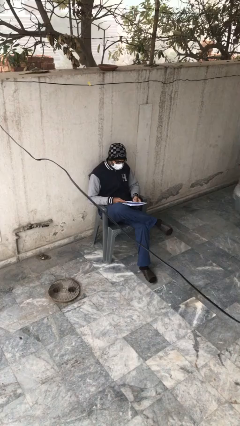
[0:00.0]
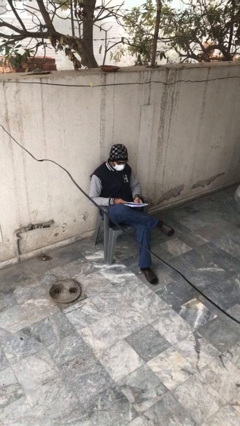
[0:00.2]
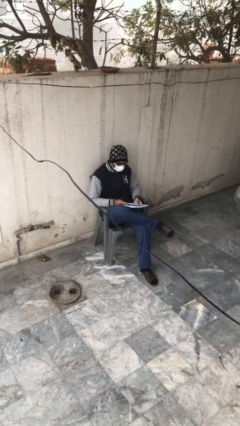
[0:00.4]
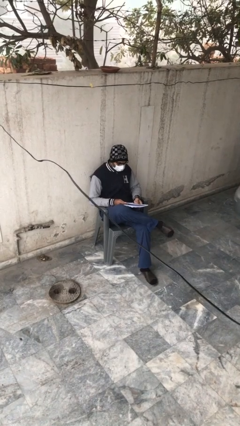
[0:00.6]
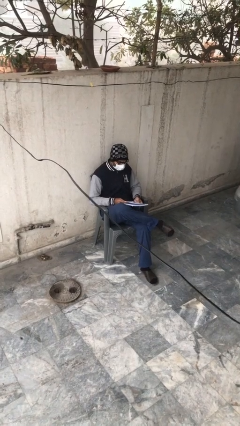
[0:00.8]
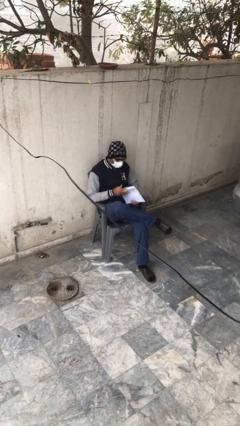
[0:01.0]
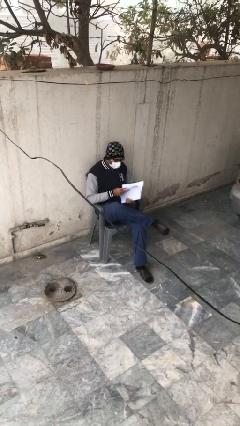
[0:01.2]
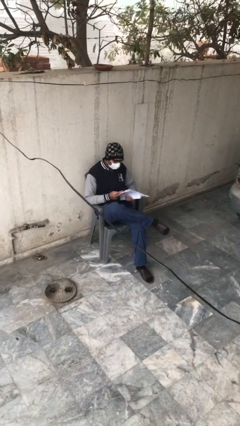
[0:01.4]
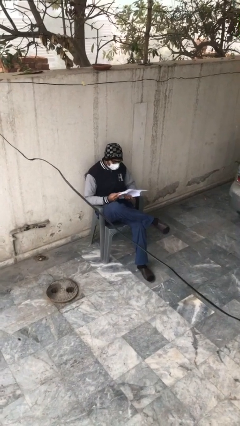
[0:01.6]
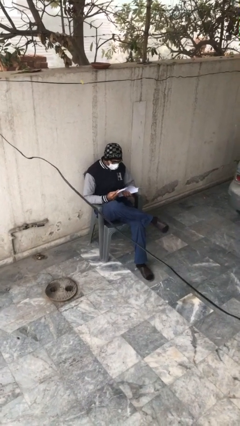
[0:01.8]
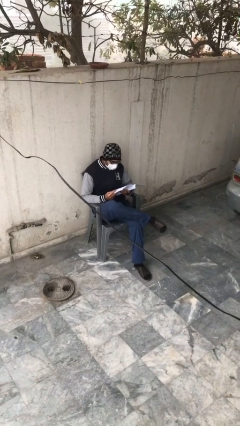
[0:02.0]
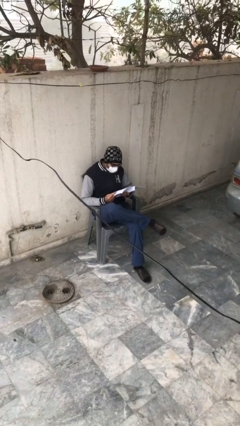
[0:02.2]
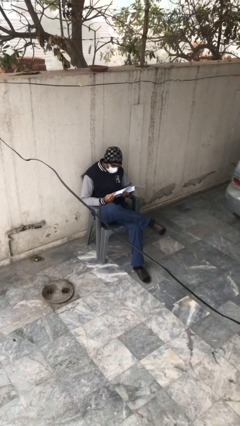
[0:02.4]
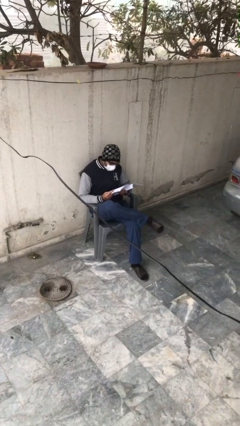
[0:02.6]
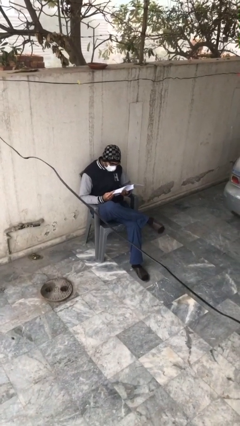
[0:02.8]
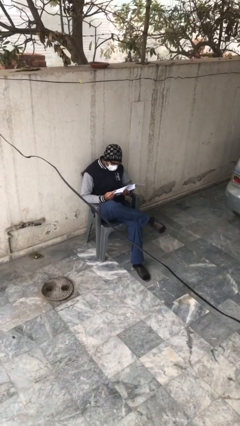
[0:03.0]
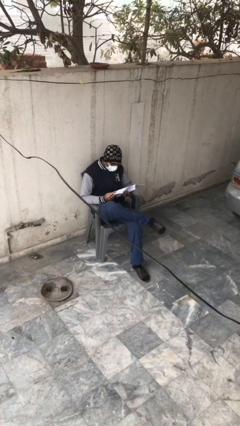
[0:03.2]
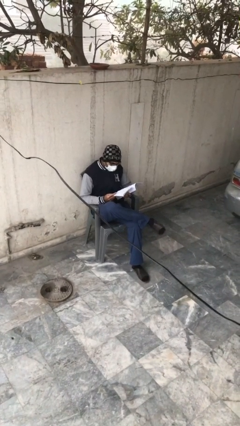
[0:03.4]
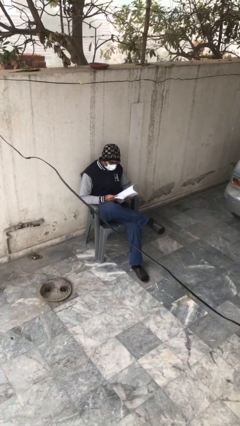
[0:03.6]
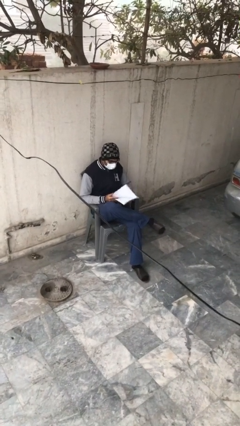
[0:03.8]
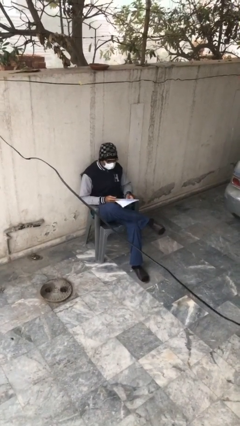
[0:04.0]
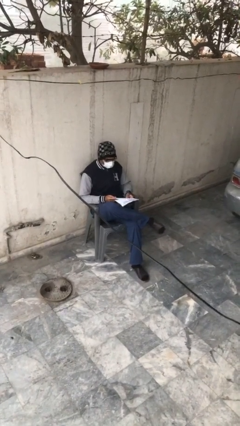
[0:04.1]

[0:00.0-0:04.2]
person reads document

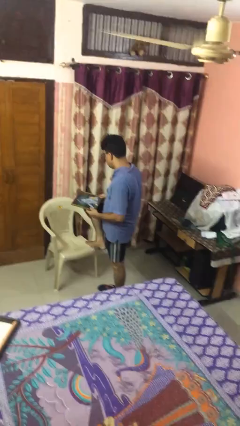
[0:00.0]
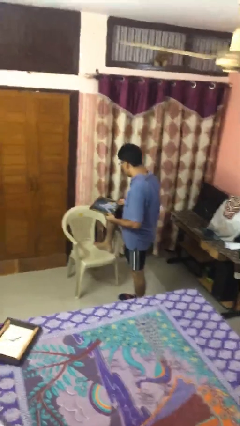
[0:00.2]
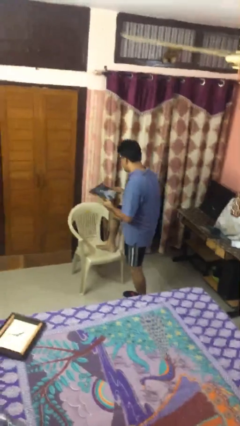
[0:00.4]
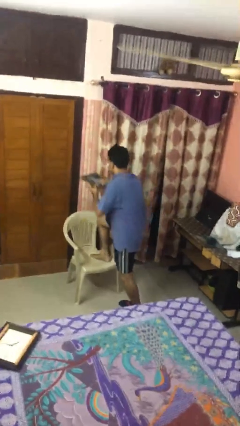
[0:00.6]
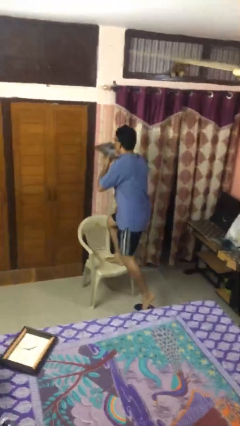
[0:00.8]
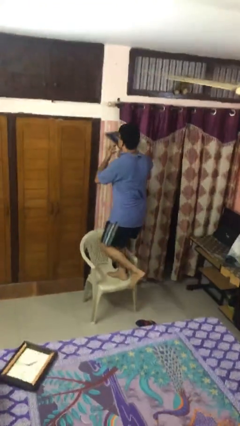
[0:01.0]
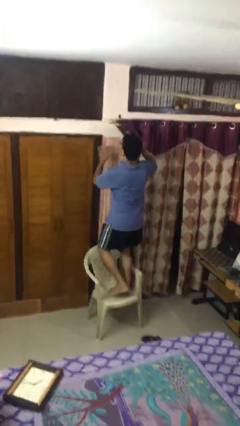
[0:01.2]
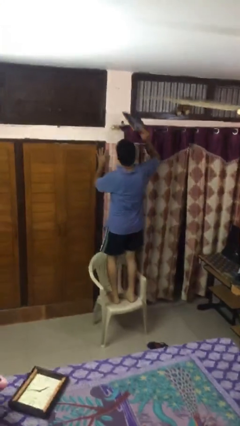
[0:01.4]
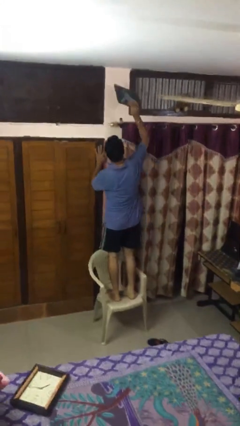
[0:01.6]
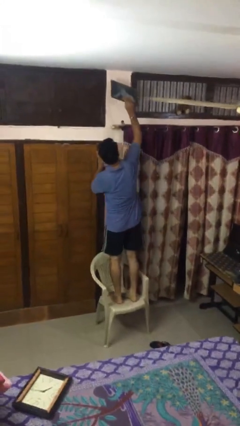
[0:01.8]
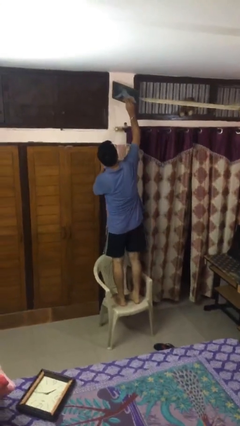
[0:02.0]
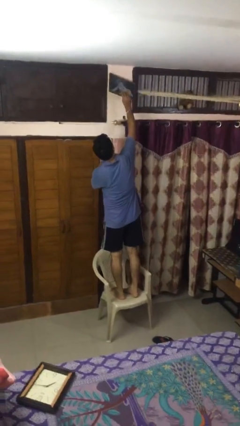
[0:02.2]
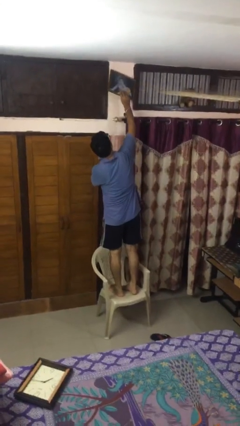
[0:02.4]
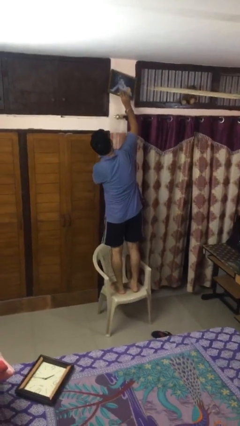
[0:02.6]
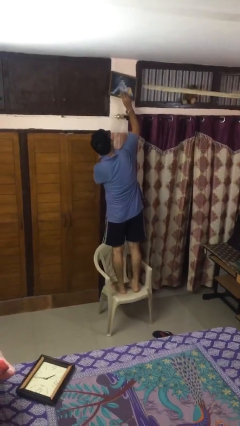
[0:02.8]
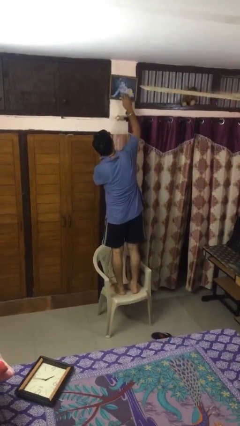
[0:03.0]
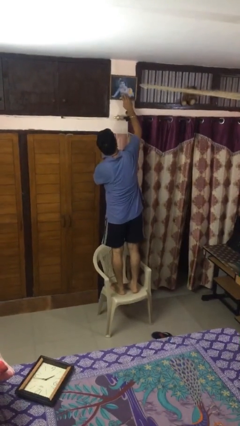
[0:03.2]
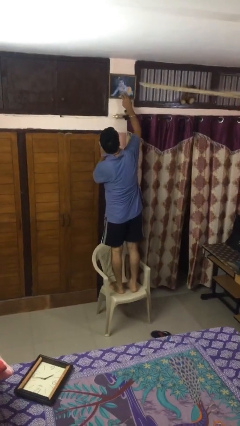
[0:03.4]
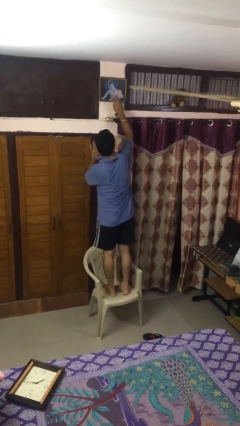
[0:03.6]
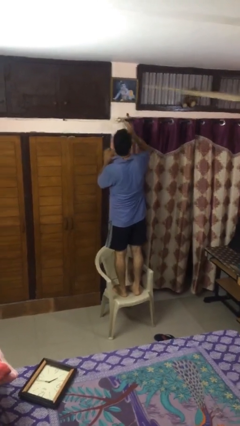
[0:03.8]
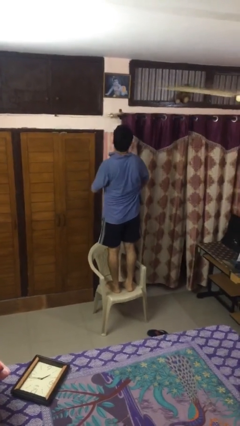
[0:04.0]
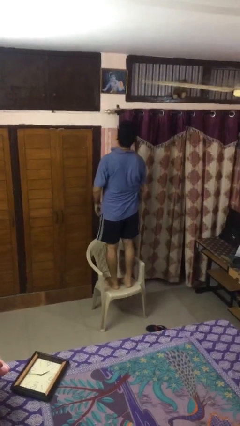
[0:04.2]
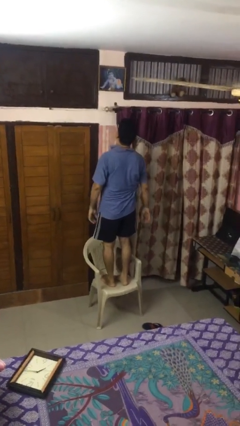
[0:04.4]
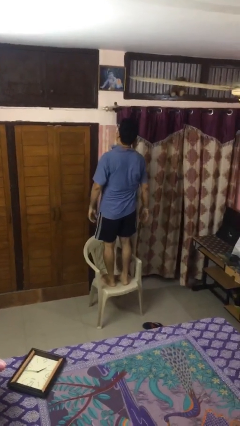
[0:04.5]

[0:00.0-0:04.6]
person puts up picture frame

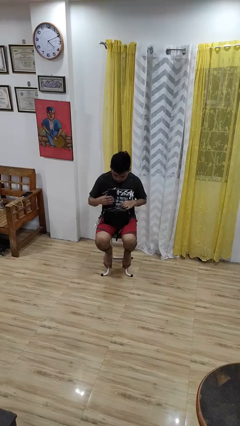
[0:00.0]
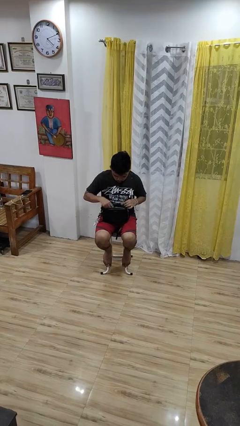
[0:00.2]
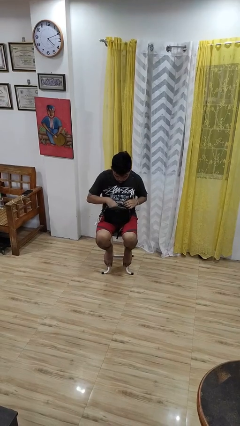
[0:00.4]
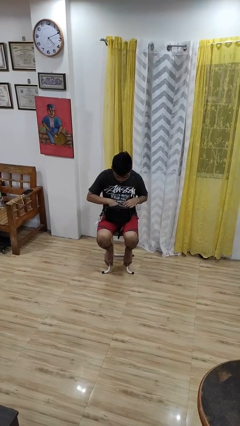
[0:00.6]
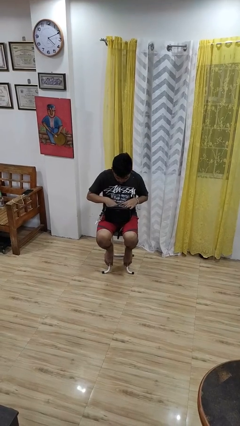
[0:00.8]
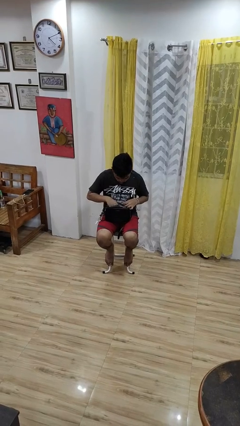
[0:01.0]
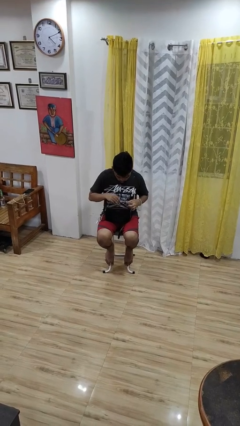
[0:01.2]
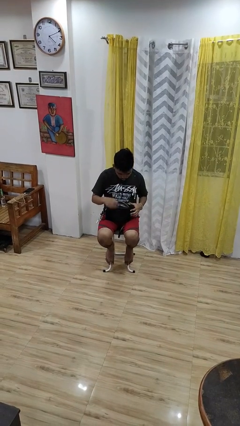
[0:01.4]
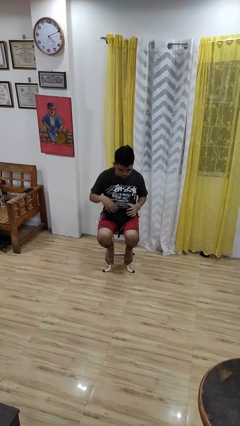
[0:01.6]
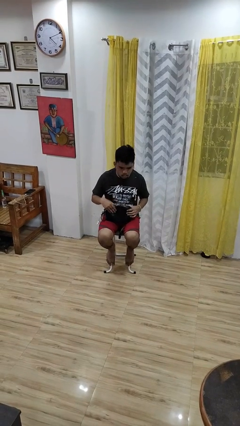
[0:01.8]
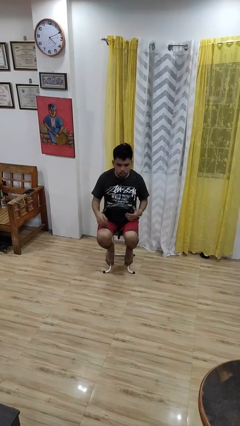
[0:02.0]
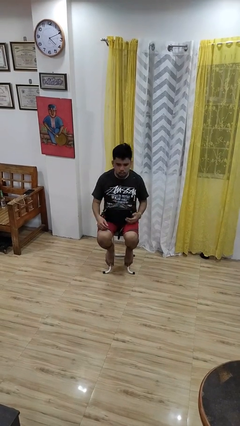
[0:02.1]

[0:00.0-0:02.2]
person puts object into purse

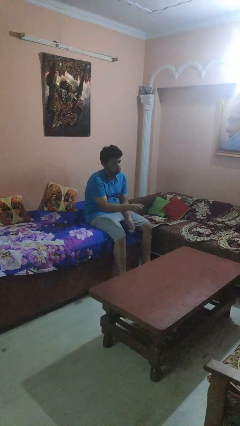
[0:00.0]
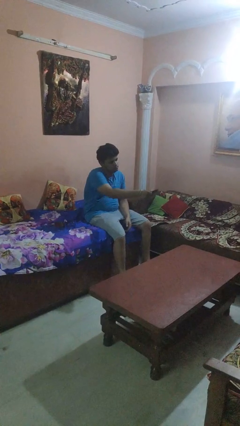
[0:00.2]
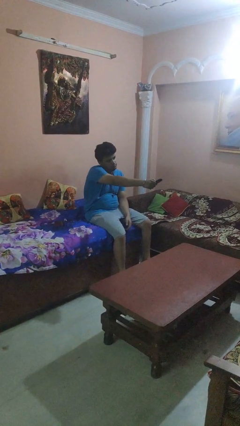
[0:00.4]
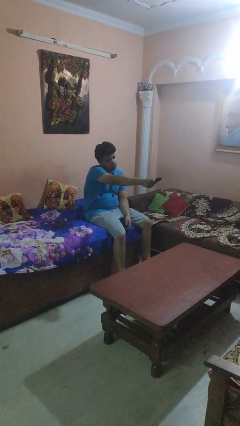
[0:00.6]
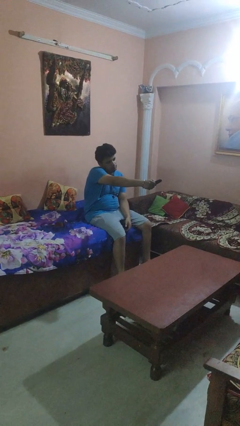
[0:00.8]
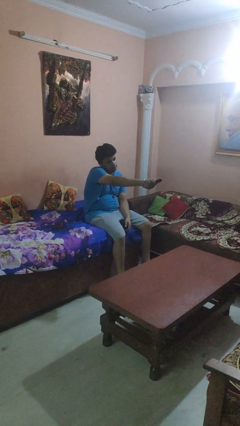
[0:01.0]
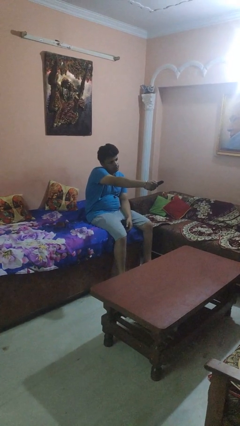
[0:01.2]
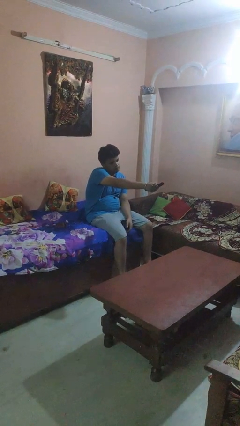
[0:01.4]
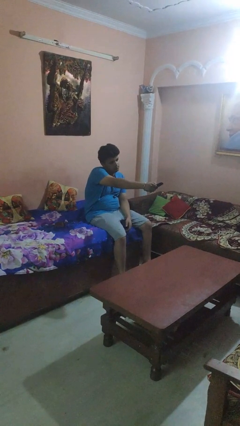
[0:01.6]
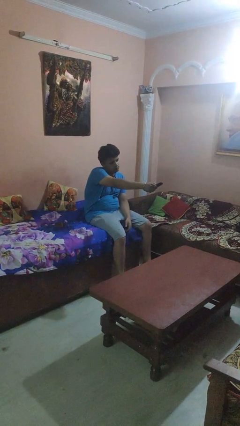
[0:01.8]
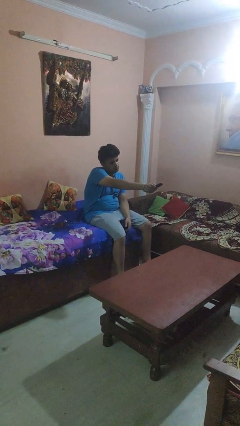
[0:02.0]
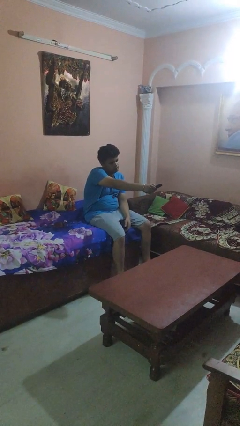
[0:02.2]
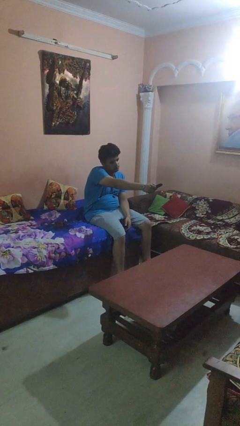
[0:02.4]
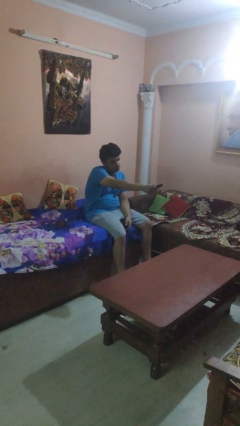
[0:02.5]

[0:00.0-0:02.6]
person uses television remote

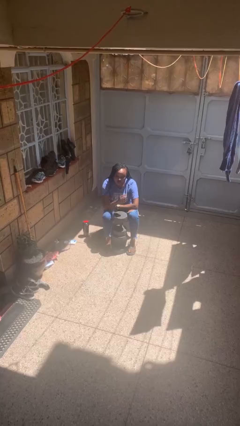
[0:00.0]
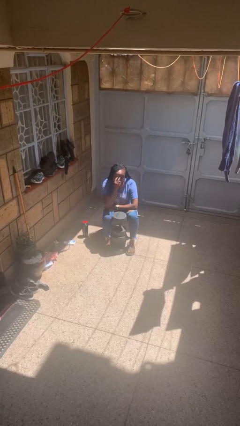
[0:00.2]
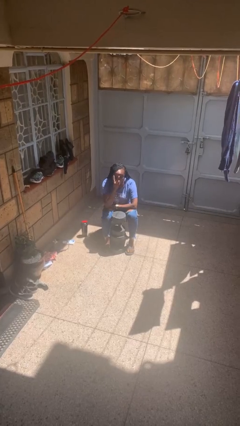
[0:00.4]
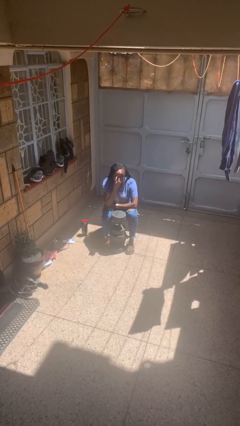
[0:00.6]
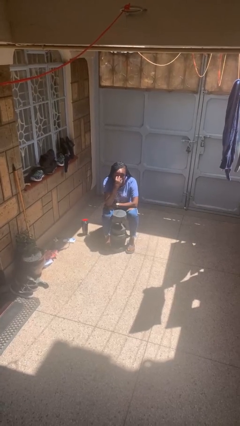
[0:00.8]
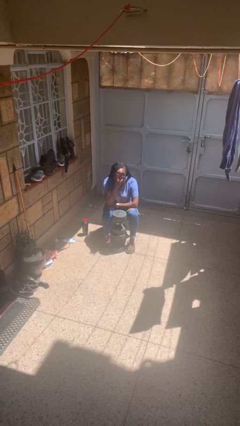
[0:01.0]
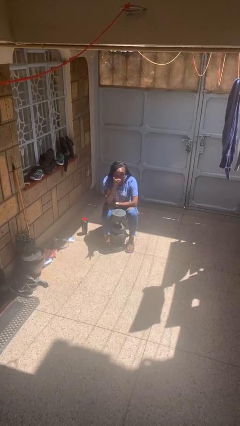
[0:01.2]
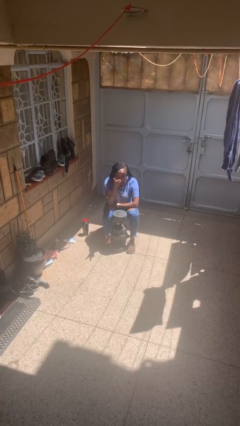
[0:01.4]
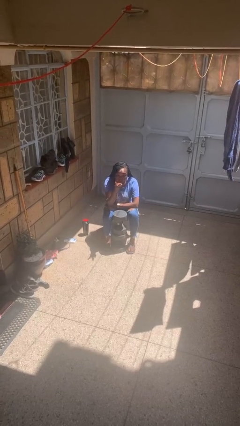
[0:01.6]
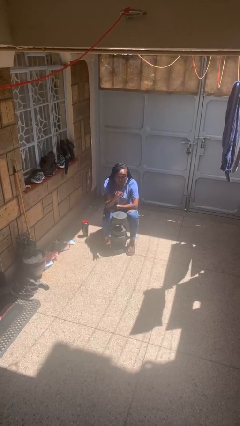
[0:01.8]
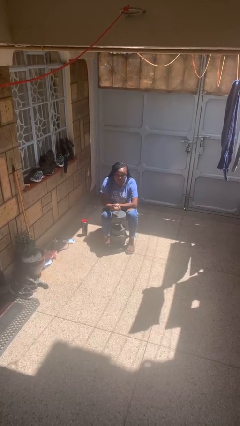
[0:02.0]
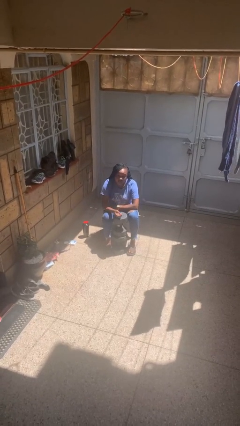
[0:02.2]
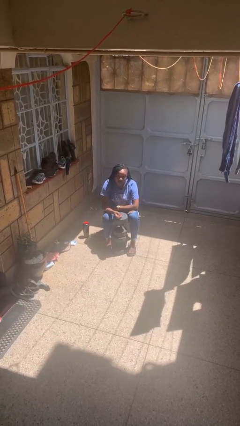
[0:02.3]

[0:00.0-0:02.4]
person gestures watch closely

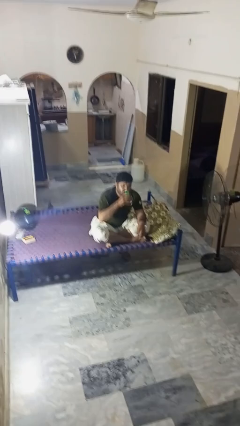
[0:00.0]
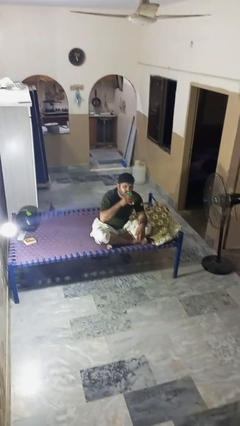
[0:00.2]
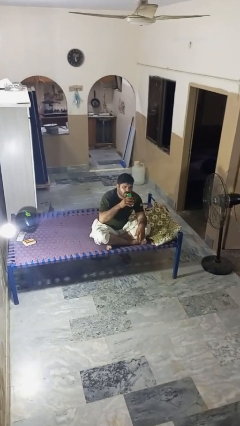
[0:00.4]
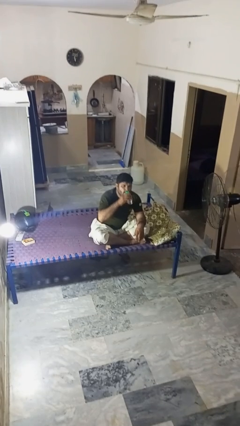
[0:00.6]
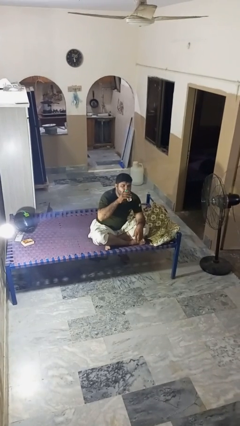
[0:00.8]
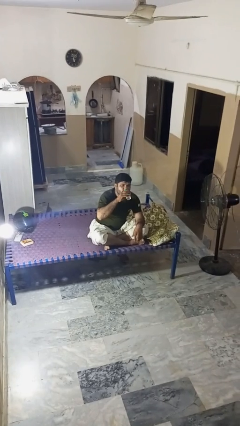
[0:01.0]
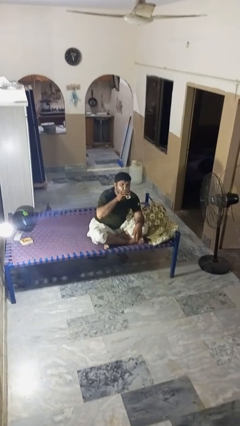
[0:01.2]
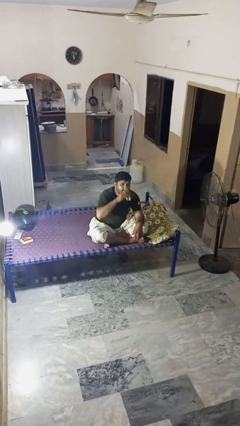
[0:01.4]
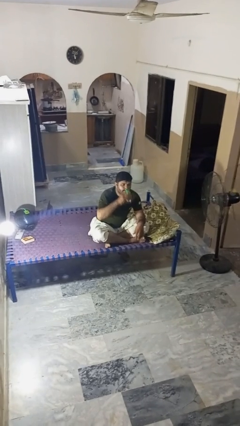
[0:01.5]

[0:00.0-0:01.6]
person drinks from beverage can
